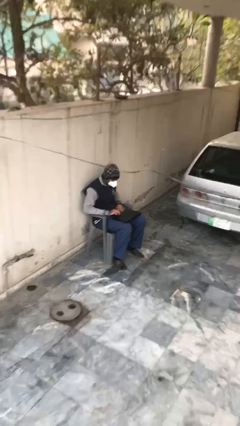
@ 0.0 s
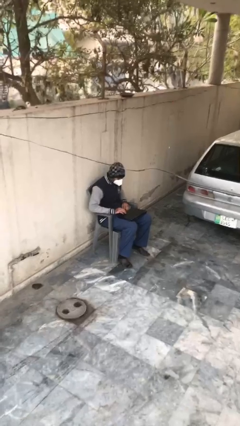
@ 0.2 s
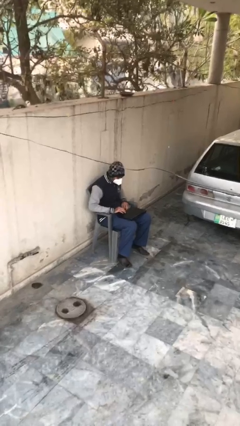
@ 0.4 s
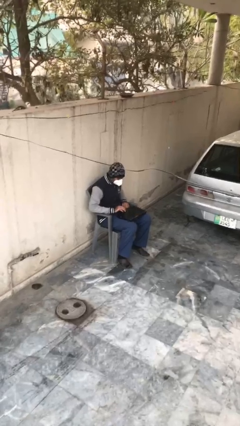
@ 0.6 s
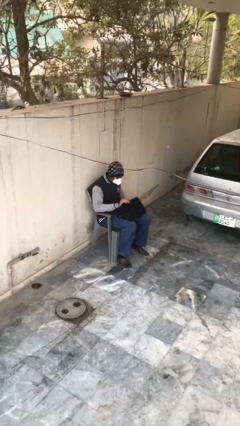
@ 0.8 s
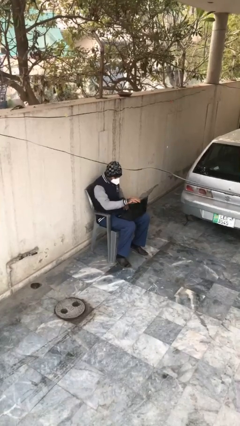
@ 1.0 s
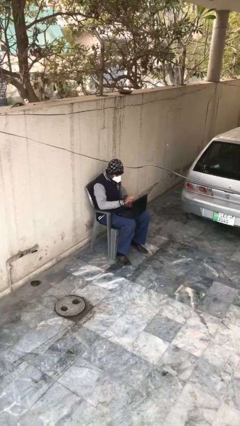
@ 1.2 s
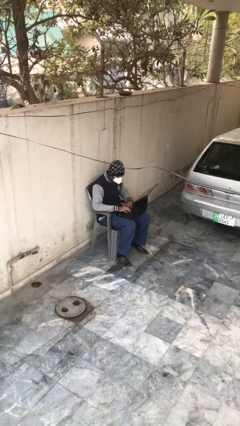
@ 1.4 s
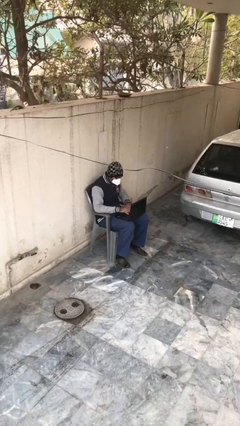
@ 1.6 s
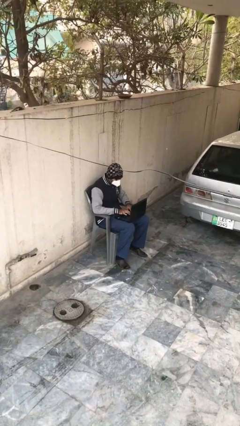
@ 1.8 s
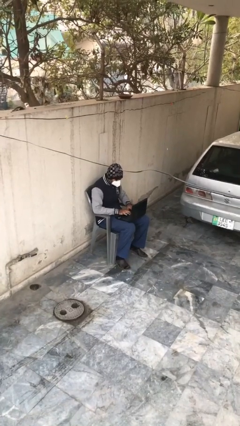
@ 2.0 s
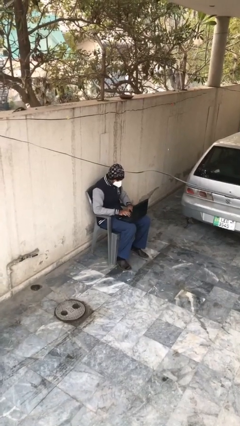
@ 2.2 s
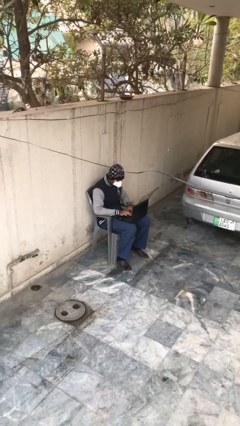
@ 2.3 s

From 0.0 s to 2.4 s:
person interacts with laptop

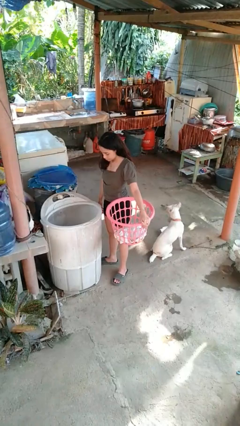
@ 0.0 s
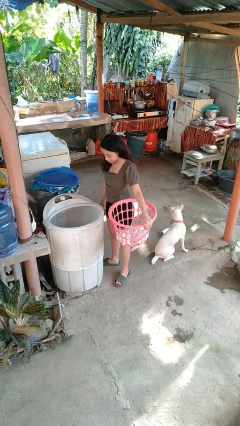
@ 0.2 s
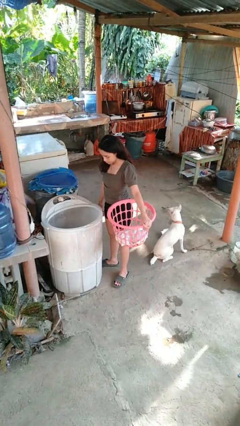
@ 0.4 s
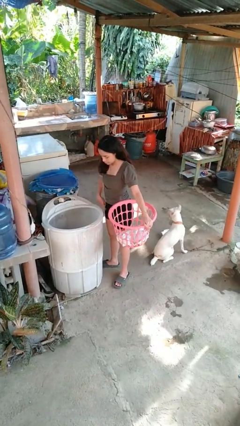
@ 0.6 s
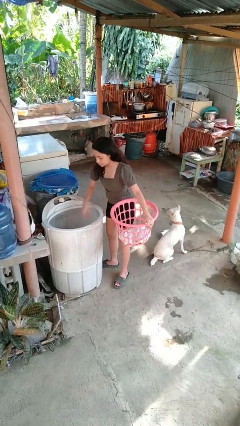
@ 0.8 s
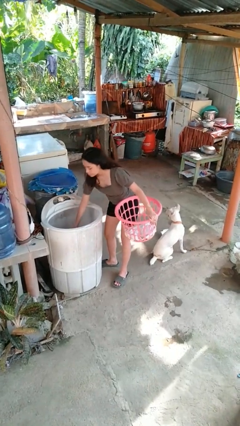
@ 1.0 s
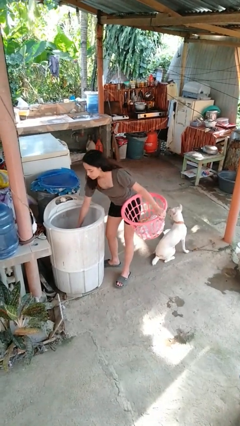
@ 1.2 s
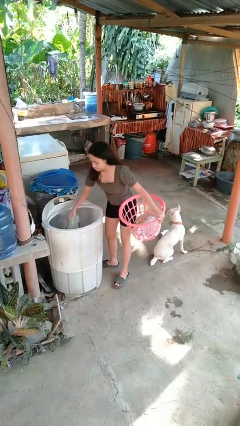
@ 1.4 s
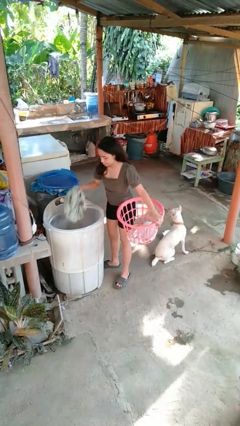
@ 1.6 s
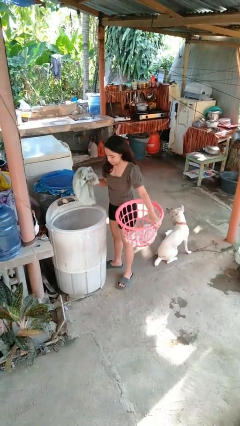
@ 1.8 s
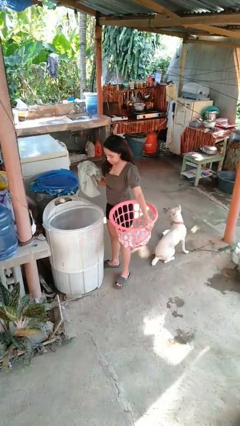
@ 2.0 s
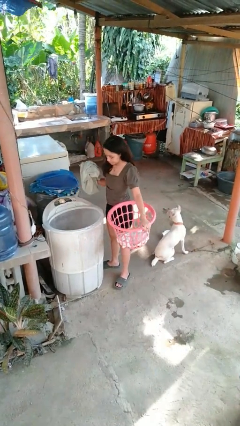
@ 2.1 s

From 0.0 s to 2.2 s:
person unloads dryer

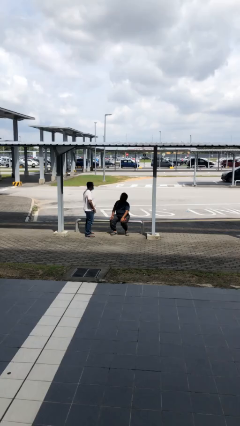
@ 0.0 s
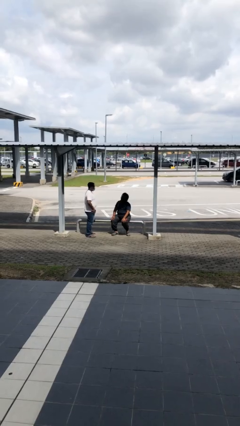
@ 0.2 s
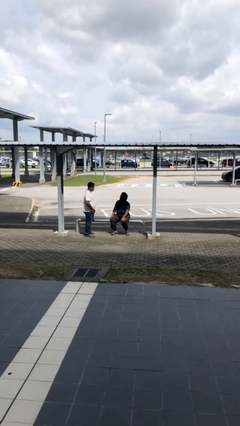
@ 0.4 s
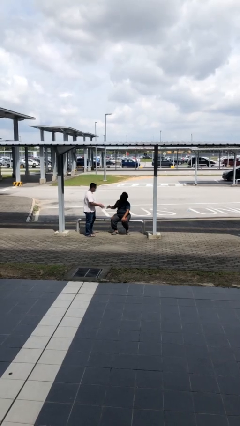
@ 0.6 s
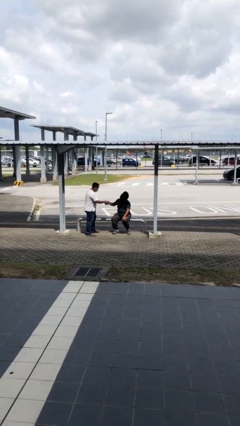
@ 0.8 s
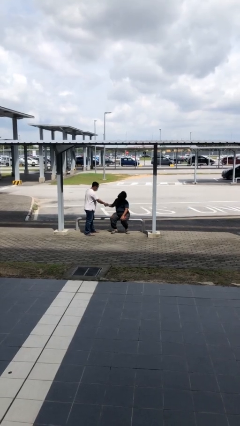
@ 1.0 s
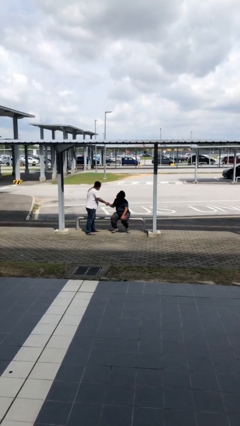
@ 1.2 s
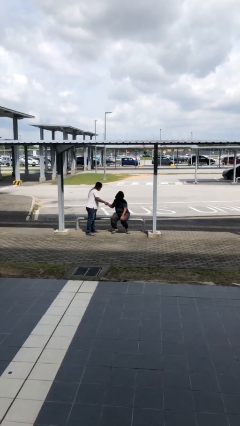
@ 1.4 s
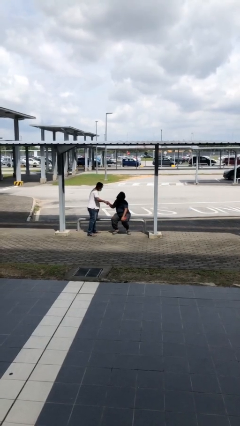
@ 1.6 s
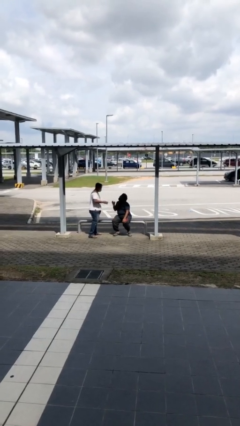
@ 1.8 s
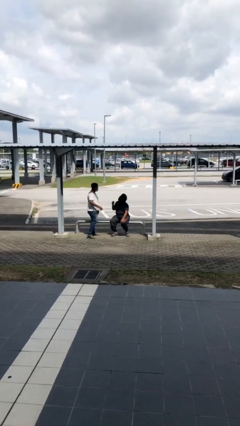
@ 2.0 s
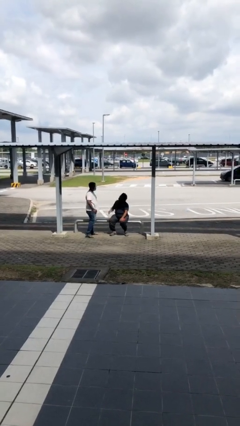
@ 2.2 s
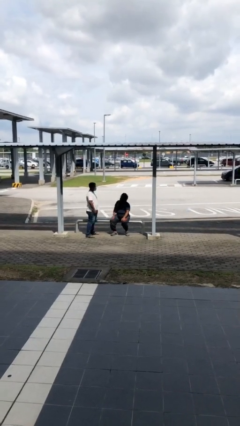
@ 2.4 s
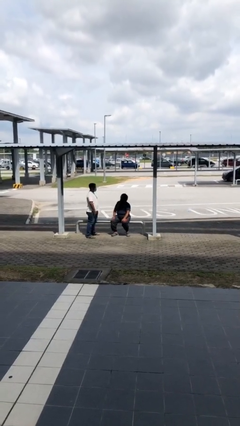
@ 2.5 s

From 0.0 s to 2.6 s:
person shakes hand

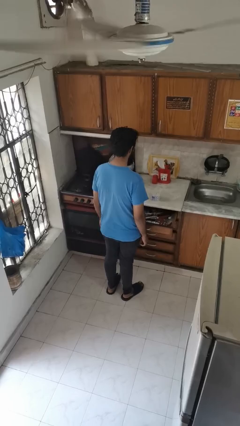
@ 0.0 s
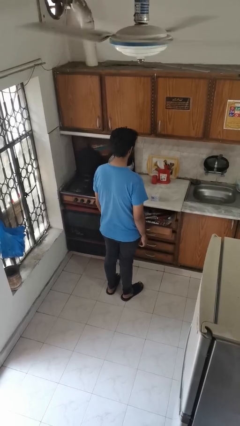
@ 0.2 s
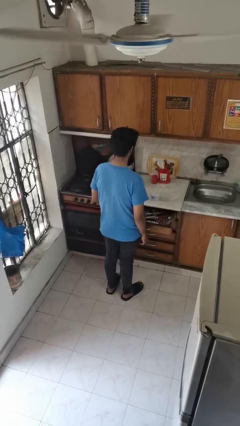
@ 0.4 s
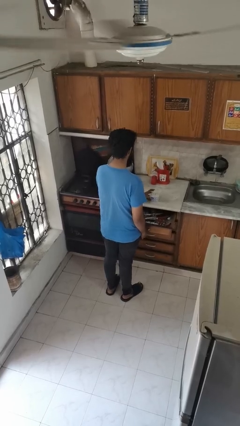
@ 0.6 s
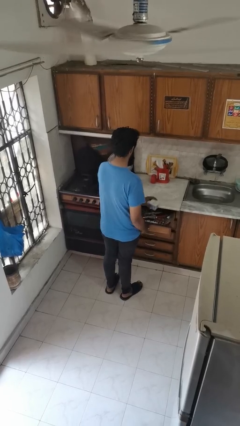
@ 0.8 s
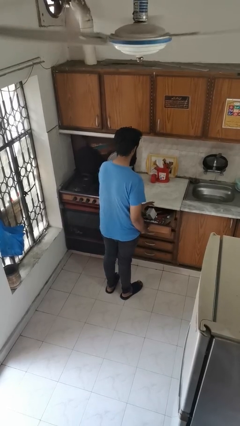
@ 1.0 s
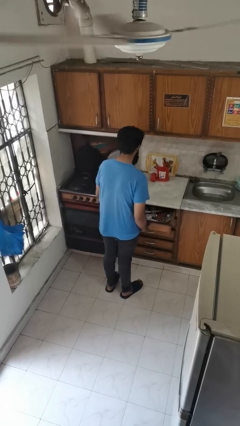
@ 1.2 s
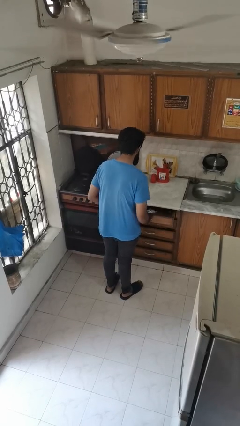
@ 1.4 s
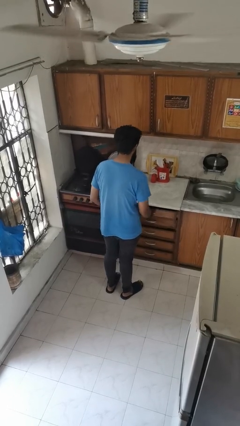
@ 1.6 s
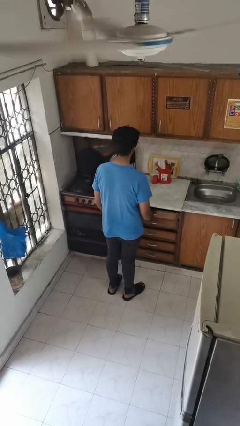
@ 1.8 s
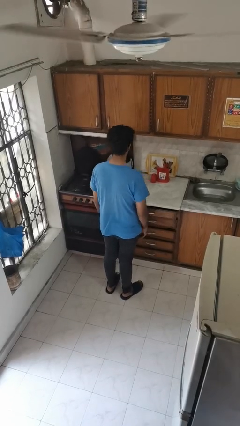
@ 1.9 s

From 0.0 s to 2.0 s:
person puts object into kitchen drawer

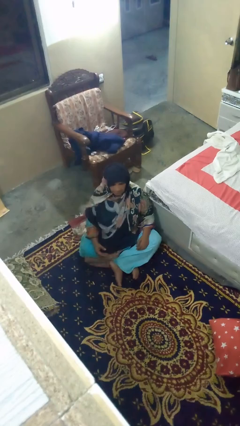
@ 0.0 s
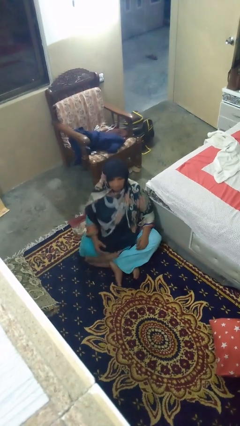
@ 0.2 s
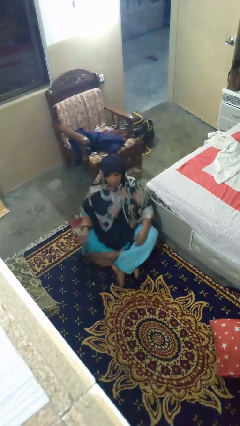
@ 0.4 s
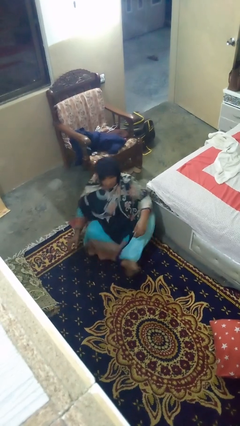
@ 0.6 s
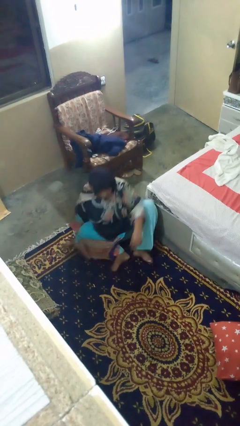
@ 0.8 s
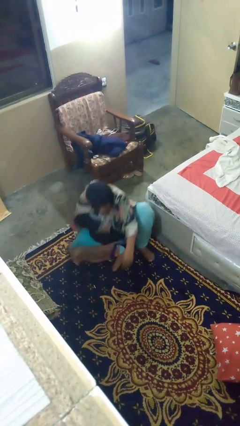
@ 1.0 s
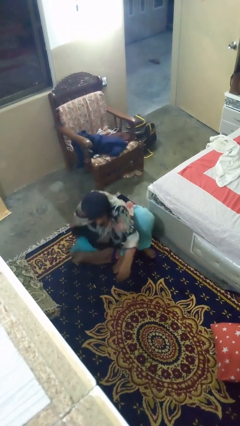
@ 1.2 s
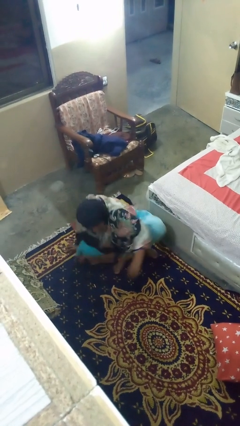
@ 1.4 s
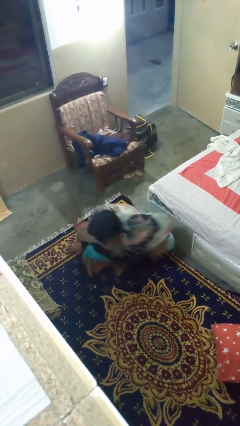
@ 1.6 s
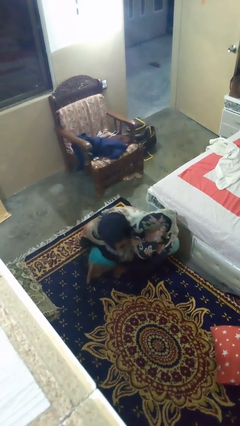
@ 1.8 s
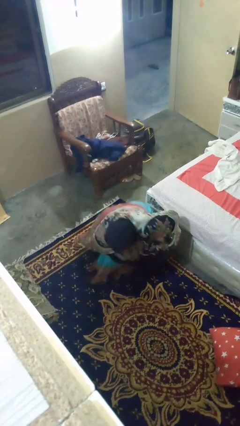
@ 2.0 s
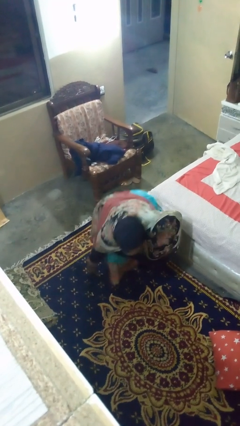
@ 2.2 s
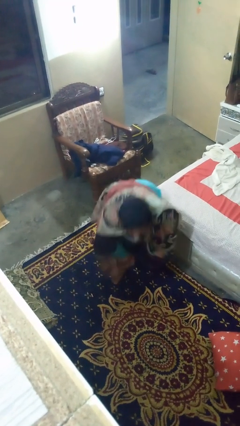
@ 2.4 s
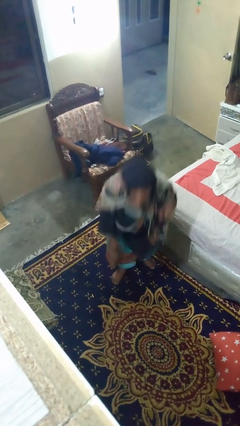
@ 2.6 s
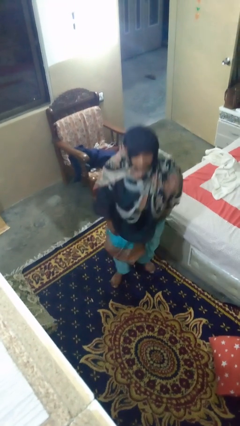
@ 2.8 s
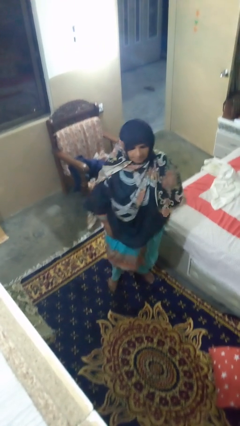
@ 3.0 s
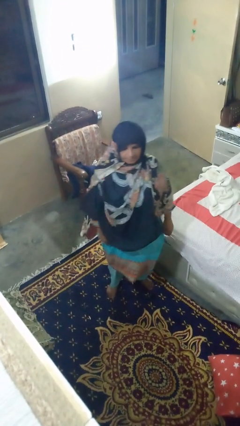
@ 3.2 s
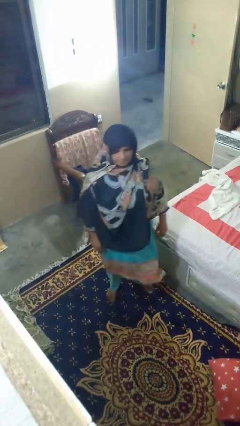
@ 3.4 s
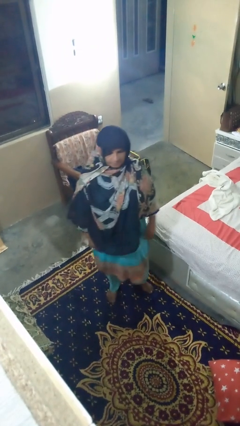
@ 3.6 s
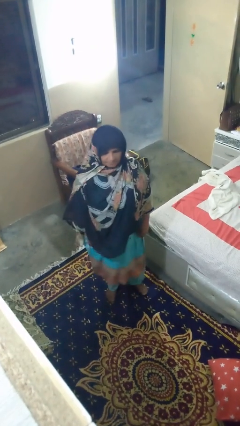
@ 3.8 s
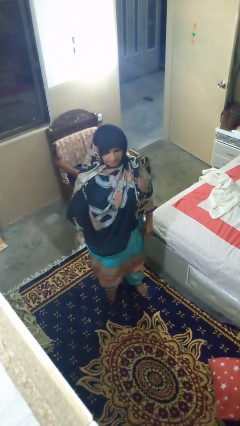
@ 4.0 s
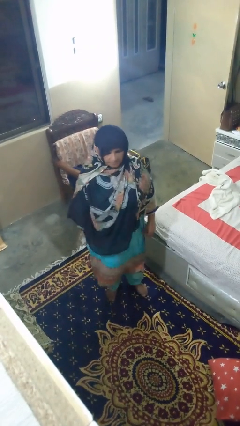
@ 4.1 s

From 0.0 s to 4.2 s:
person stands up from floor

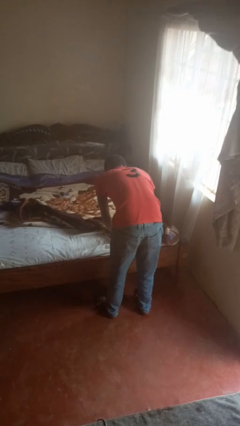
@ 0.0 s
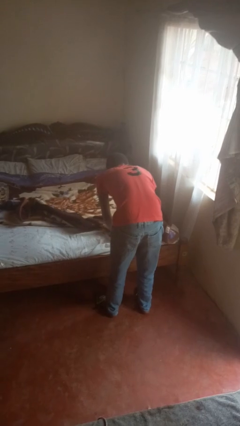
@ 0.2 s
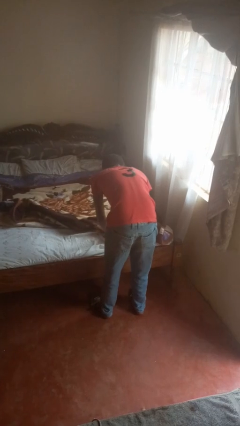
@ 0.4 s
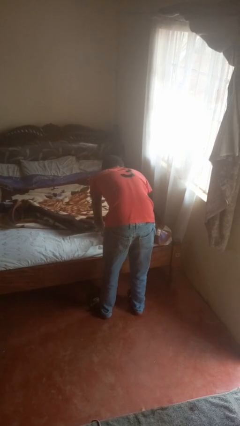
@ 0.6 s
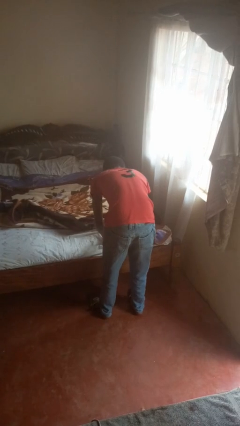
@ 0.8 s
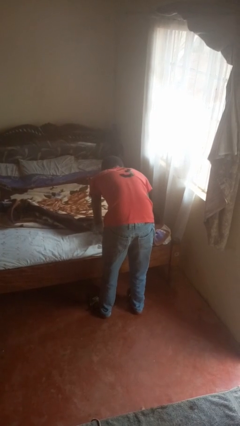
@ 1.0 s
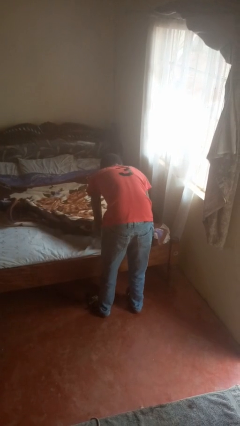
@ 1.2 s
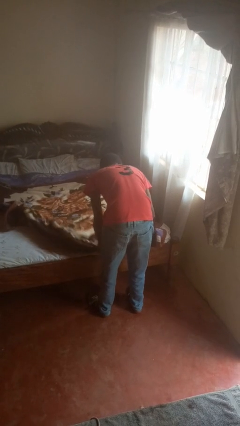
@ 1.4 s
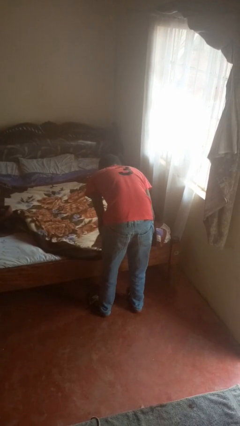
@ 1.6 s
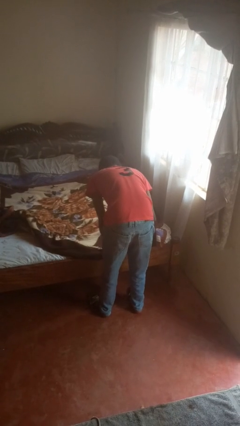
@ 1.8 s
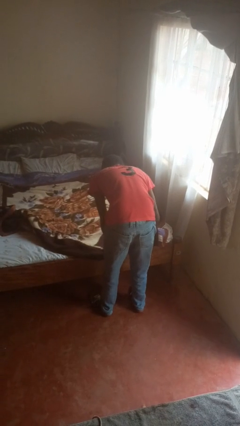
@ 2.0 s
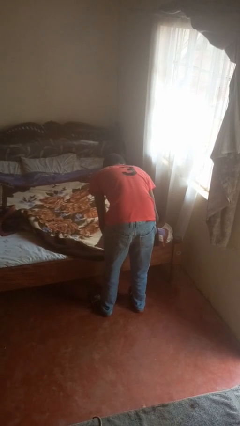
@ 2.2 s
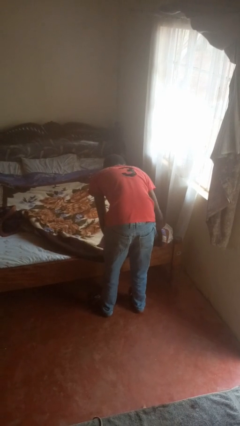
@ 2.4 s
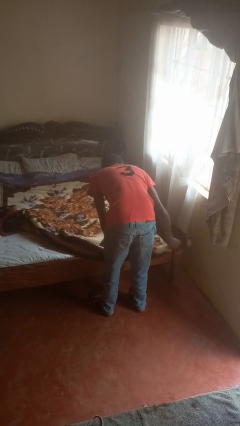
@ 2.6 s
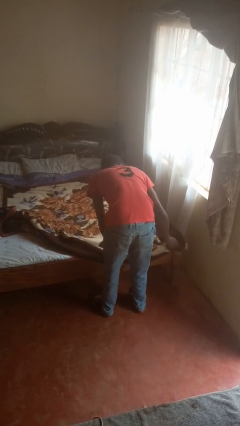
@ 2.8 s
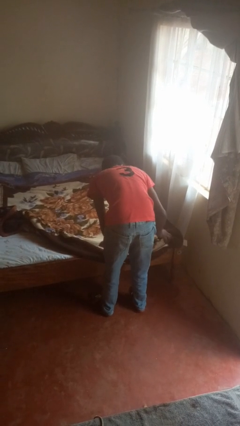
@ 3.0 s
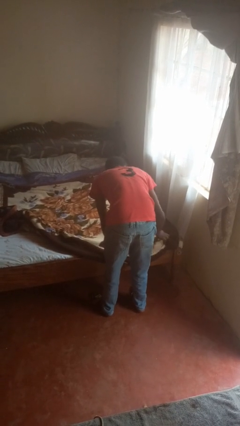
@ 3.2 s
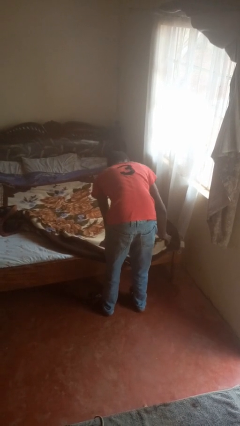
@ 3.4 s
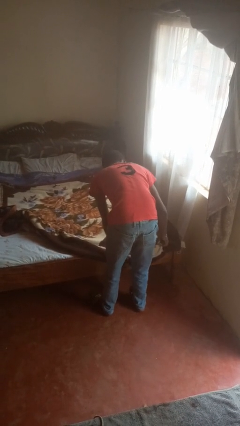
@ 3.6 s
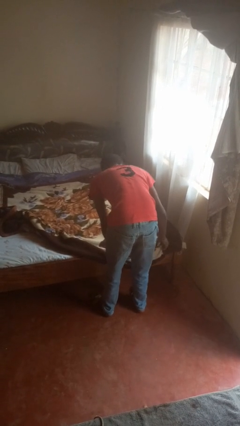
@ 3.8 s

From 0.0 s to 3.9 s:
person makes bed
